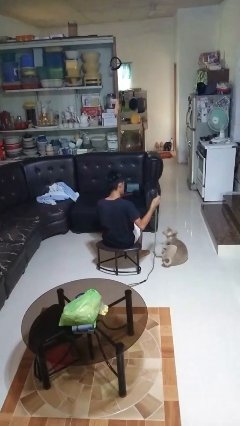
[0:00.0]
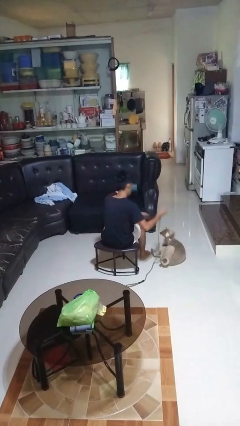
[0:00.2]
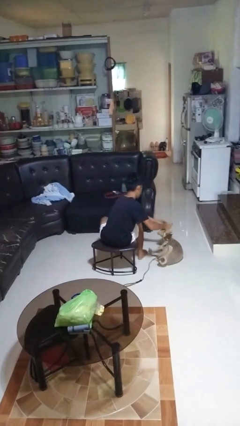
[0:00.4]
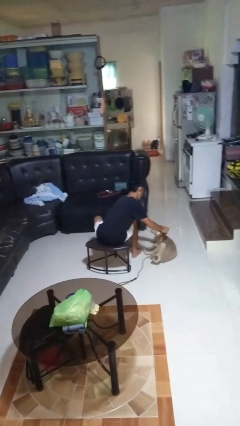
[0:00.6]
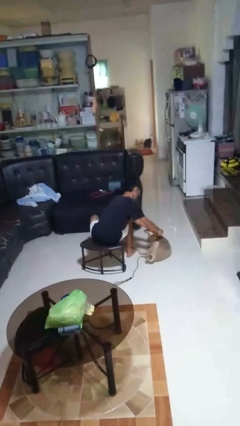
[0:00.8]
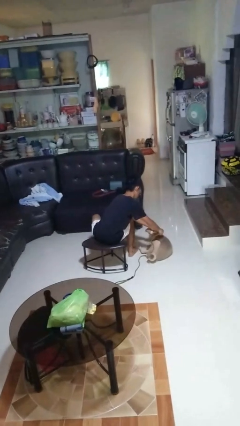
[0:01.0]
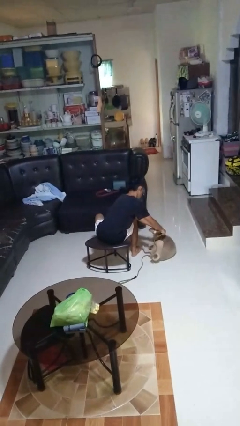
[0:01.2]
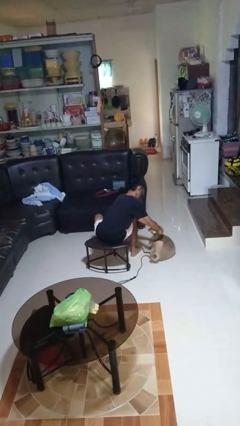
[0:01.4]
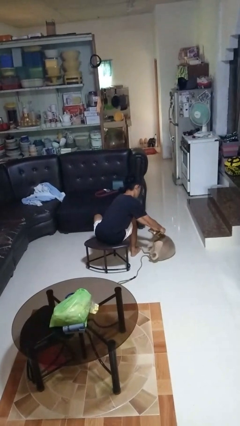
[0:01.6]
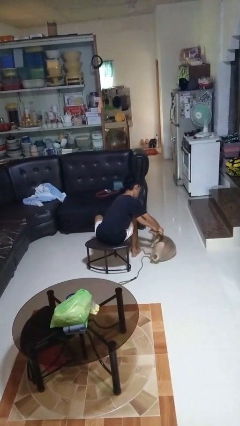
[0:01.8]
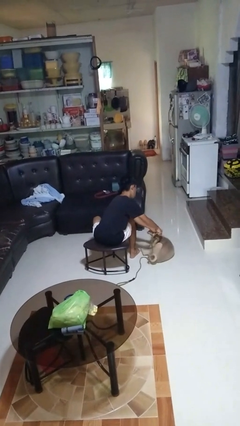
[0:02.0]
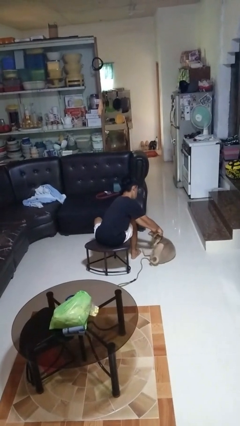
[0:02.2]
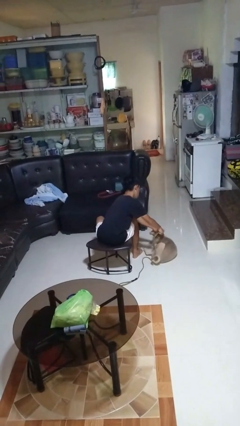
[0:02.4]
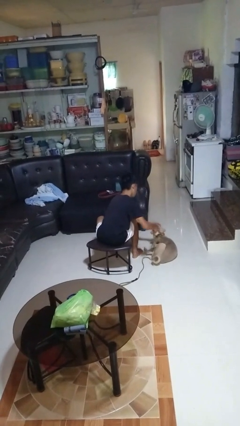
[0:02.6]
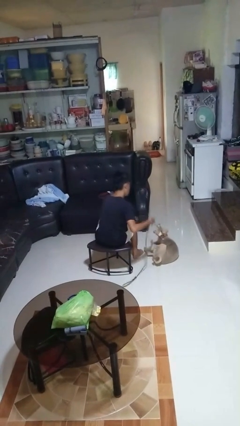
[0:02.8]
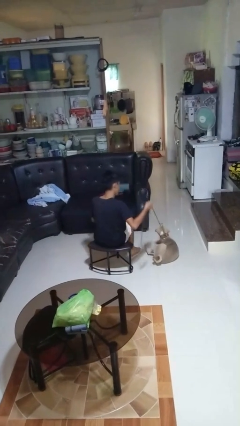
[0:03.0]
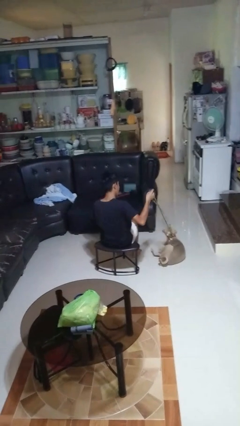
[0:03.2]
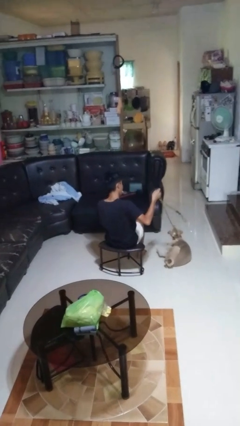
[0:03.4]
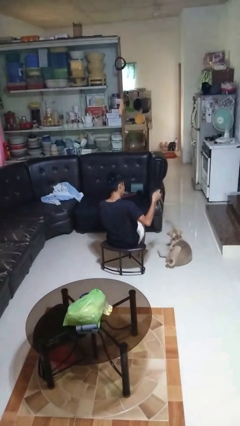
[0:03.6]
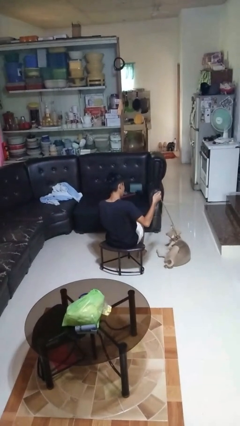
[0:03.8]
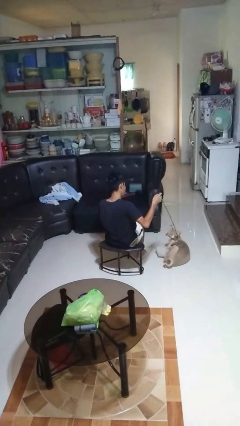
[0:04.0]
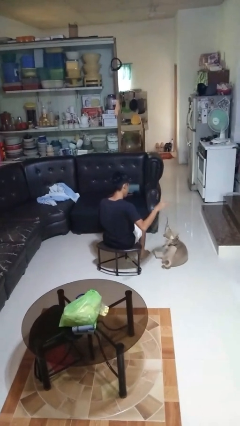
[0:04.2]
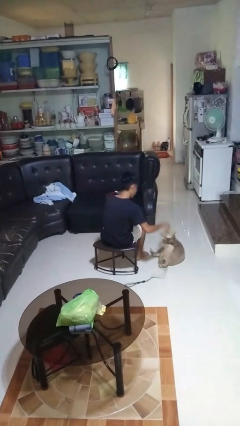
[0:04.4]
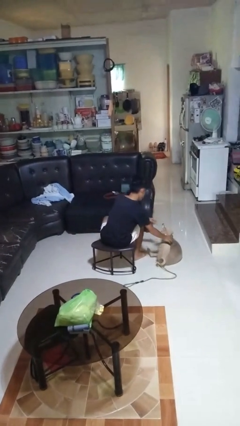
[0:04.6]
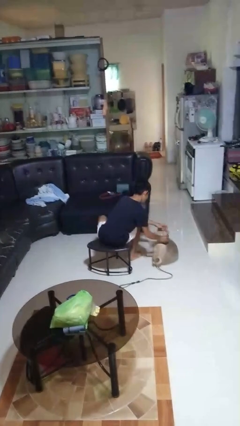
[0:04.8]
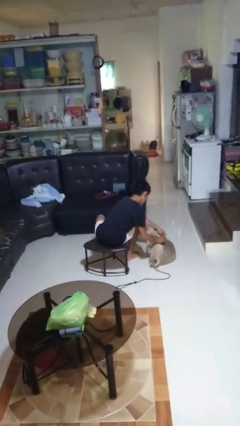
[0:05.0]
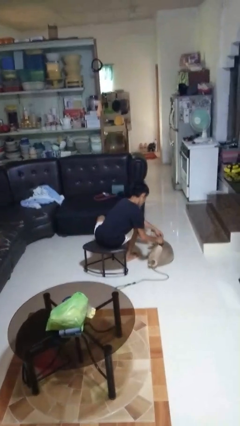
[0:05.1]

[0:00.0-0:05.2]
person attaches leash to dog

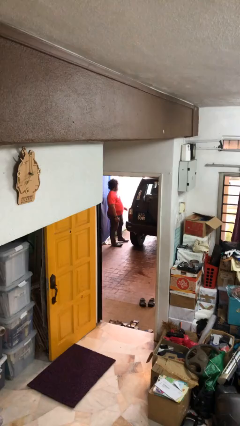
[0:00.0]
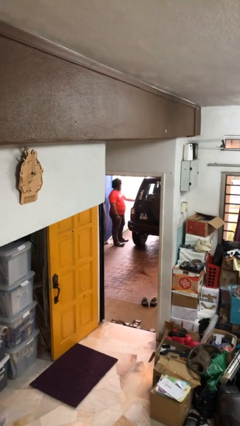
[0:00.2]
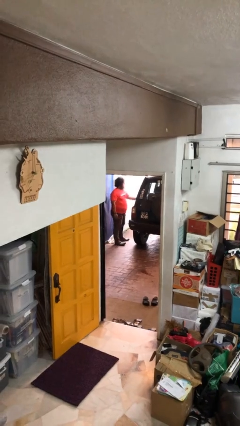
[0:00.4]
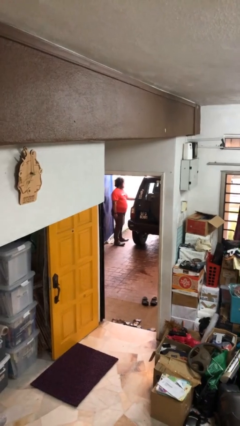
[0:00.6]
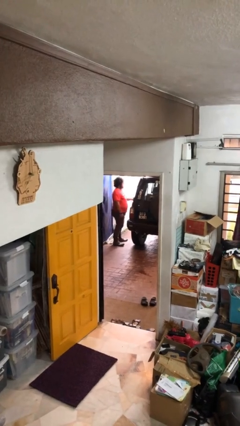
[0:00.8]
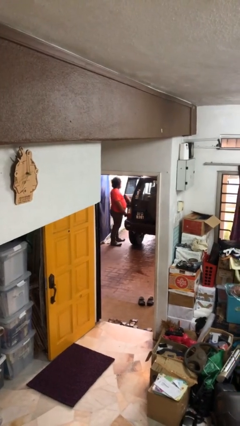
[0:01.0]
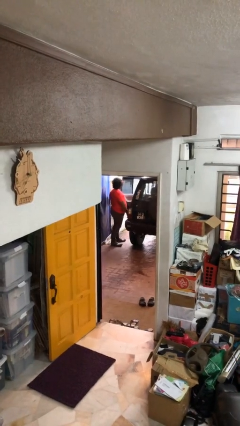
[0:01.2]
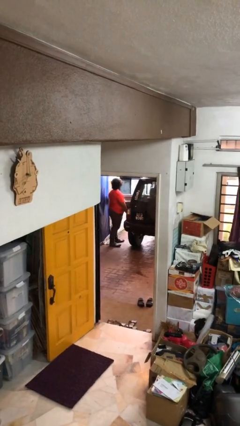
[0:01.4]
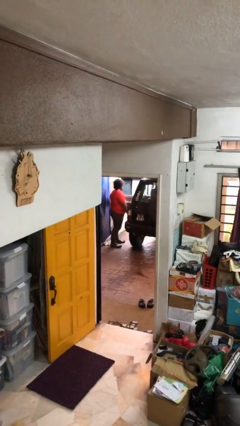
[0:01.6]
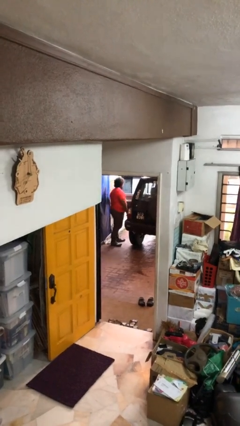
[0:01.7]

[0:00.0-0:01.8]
person opens car door

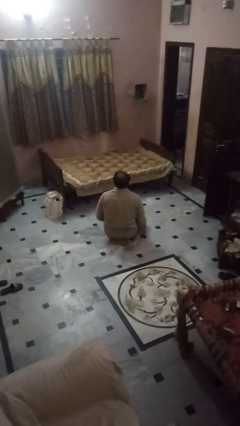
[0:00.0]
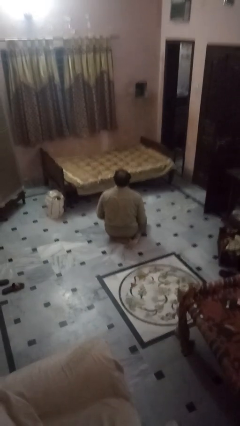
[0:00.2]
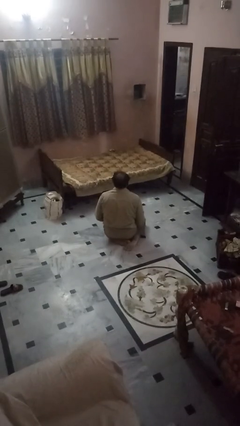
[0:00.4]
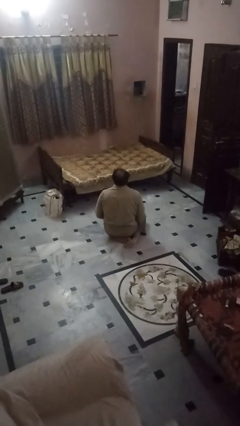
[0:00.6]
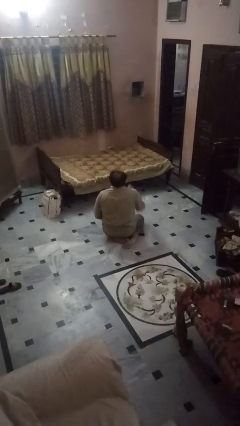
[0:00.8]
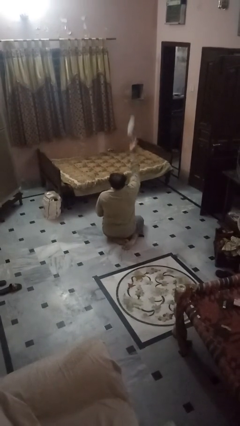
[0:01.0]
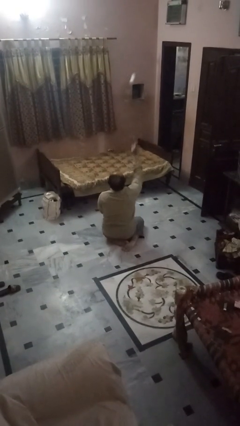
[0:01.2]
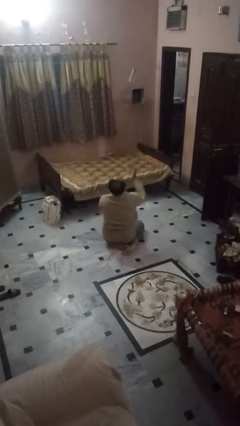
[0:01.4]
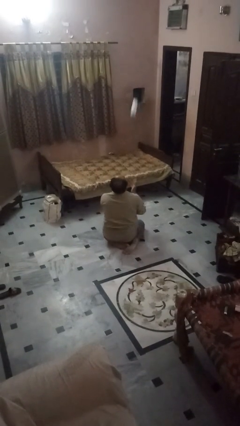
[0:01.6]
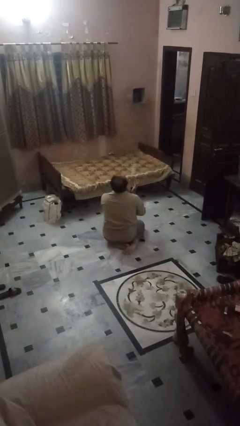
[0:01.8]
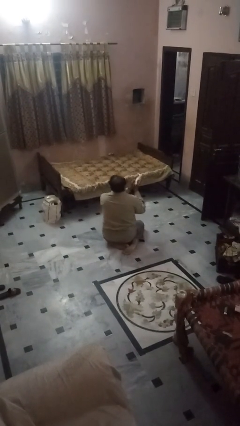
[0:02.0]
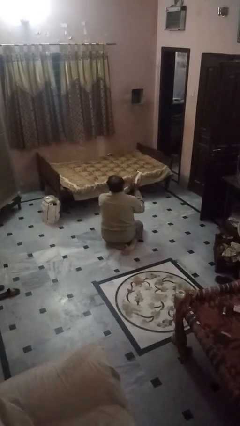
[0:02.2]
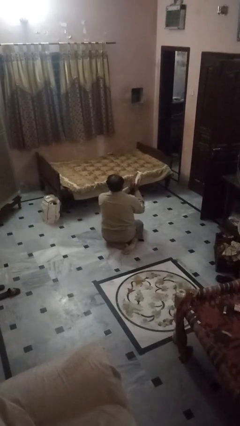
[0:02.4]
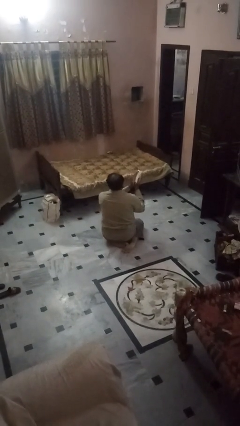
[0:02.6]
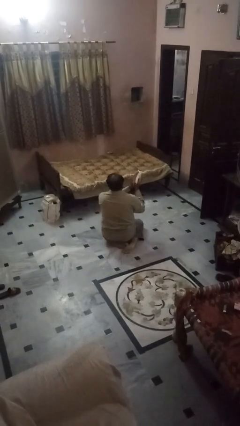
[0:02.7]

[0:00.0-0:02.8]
person drops object

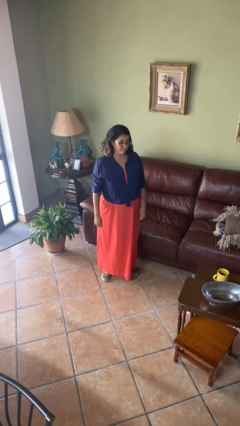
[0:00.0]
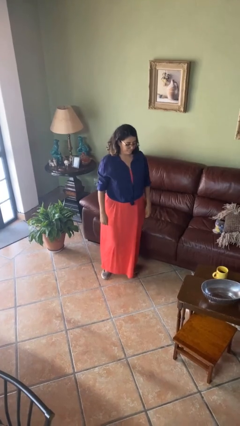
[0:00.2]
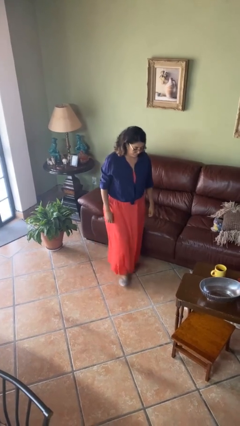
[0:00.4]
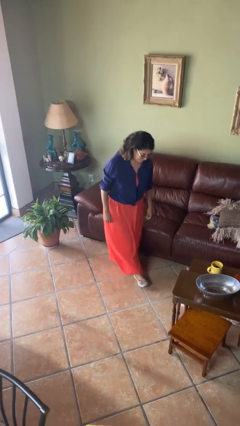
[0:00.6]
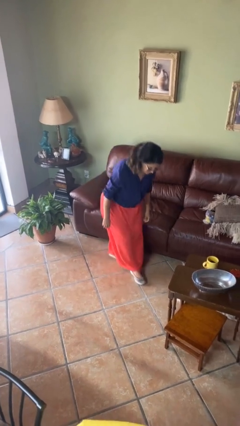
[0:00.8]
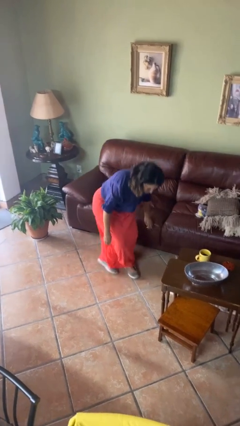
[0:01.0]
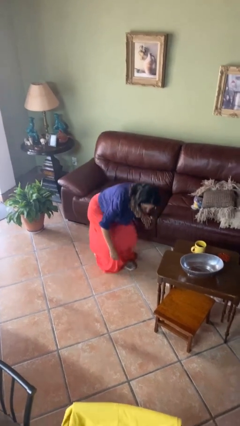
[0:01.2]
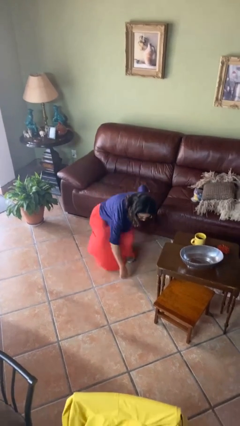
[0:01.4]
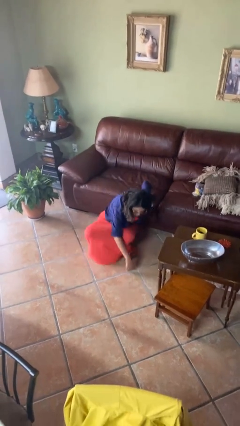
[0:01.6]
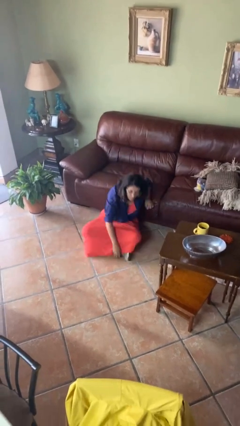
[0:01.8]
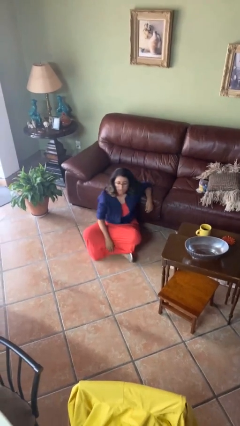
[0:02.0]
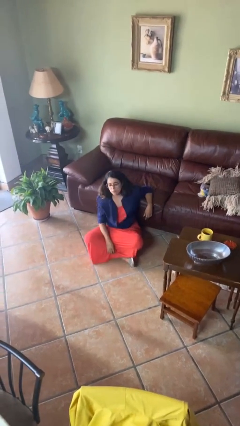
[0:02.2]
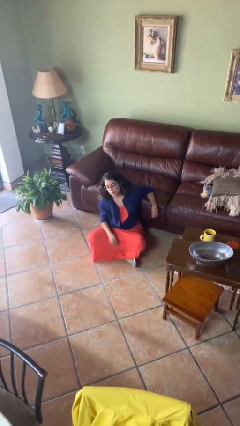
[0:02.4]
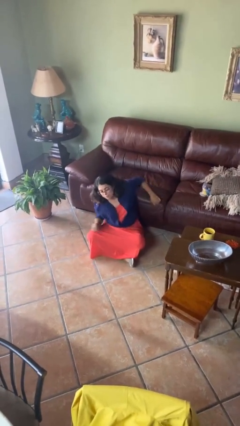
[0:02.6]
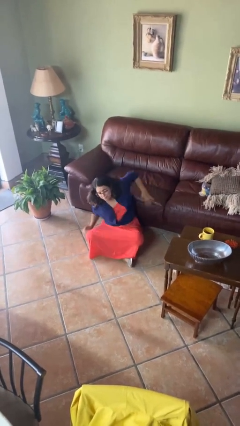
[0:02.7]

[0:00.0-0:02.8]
person sits crisscross

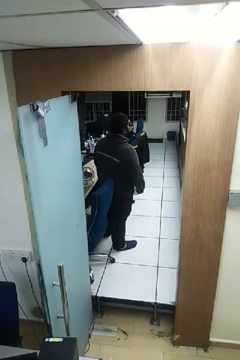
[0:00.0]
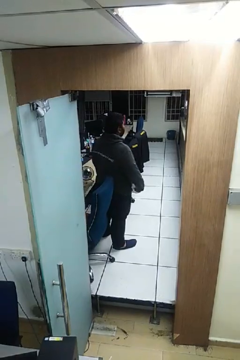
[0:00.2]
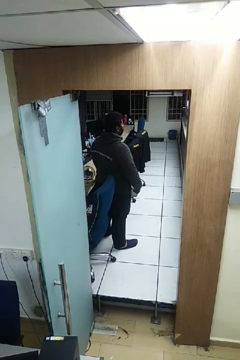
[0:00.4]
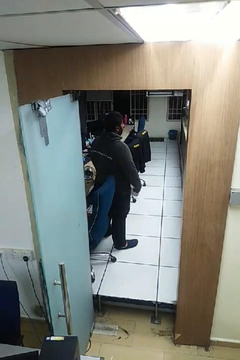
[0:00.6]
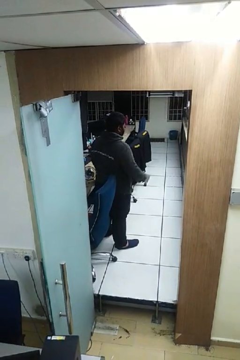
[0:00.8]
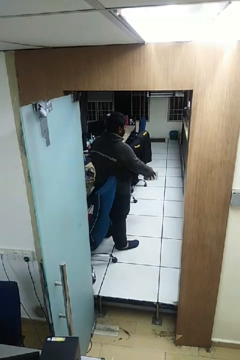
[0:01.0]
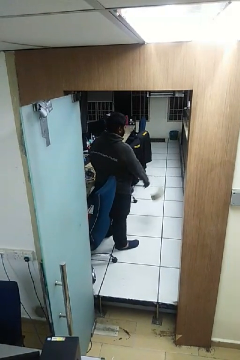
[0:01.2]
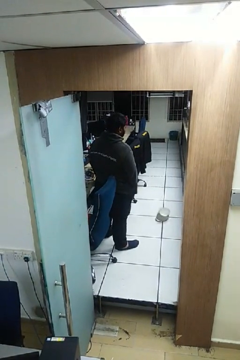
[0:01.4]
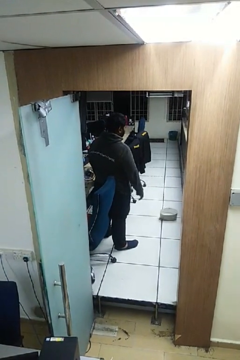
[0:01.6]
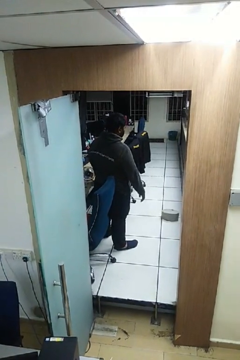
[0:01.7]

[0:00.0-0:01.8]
person throws object to ground

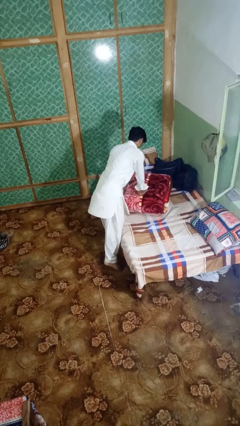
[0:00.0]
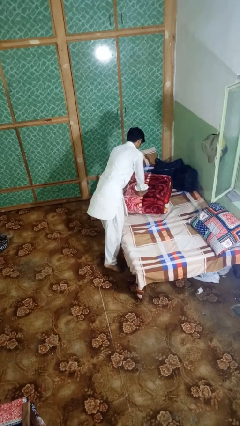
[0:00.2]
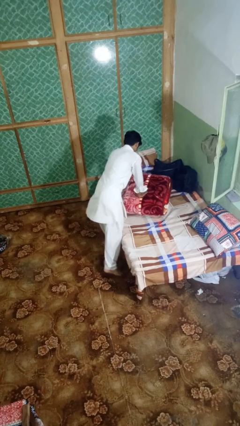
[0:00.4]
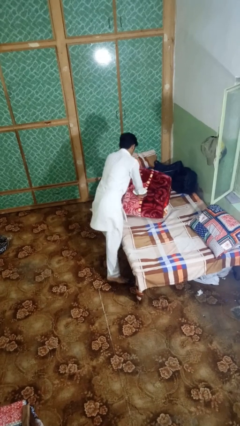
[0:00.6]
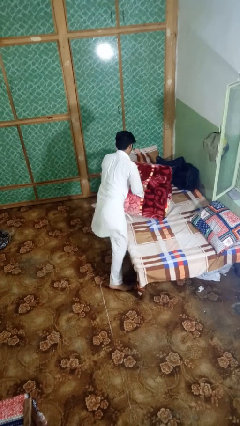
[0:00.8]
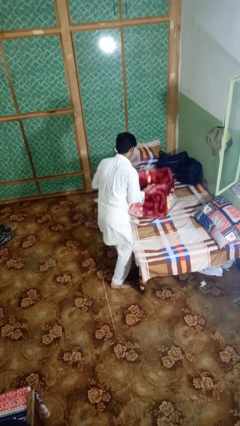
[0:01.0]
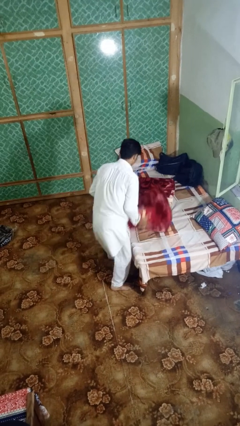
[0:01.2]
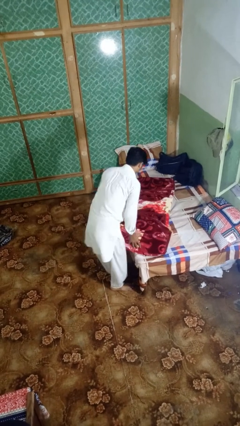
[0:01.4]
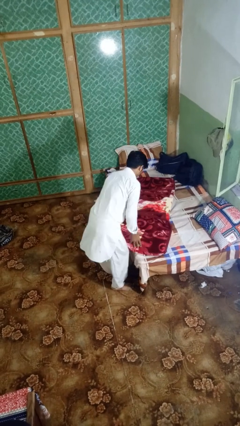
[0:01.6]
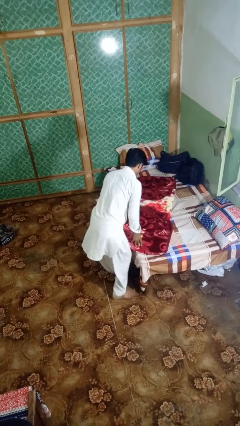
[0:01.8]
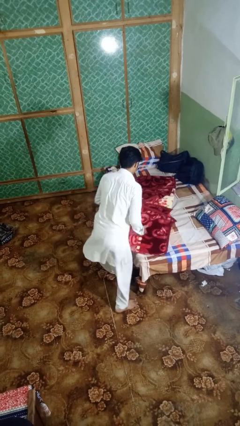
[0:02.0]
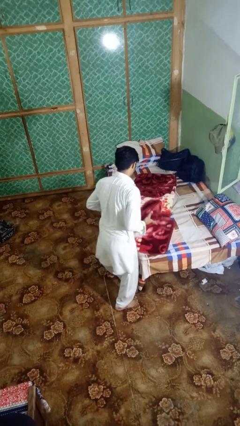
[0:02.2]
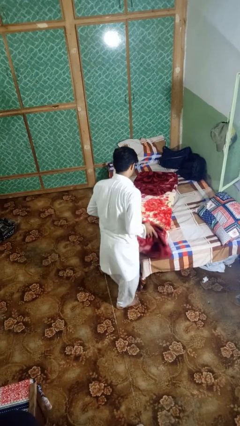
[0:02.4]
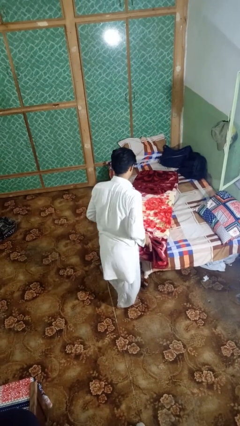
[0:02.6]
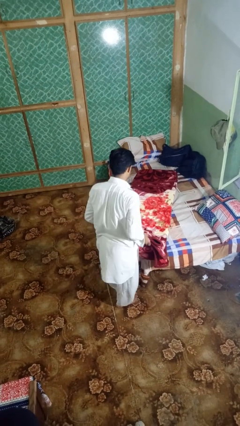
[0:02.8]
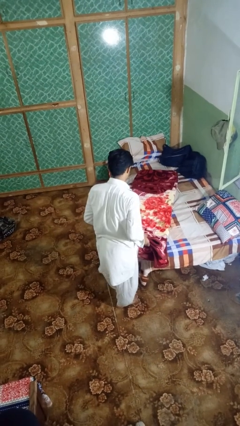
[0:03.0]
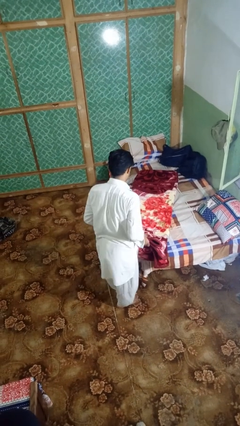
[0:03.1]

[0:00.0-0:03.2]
person unfolds blanket
